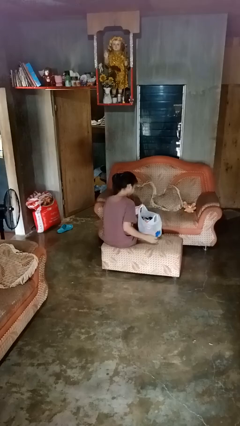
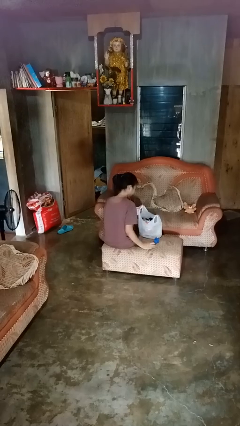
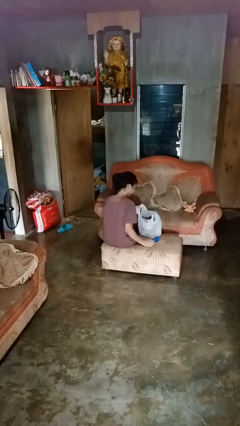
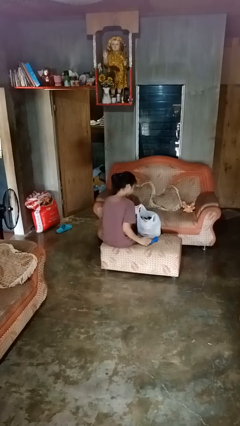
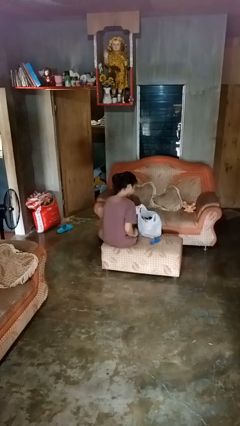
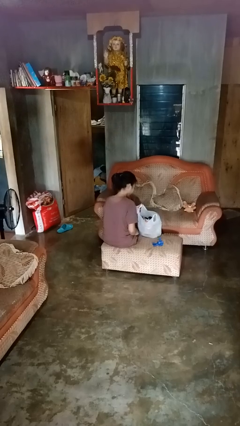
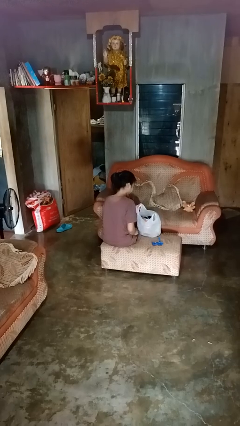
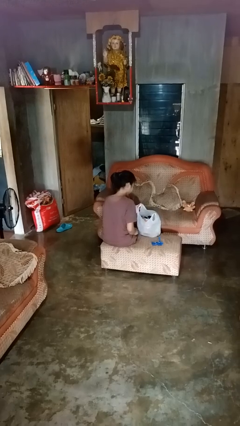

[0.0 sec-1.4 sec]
person takes object from bag

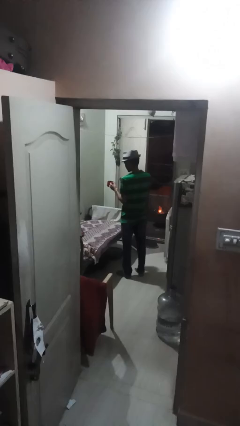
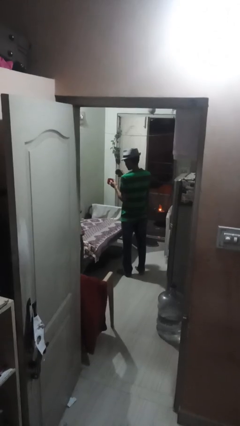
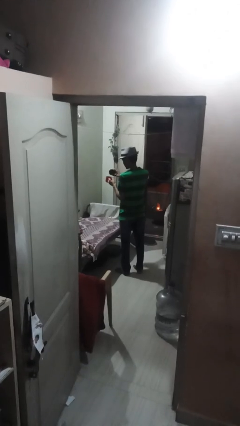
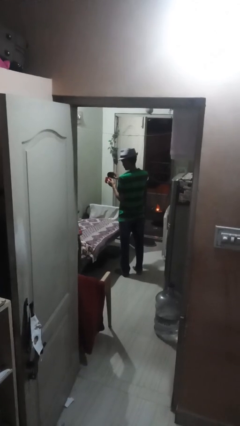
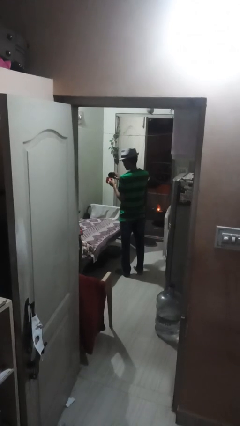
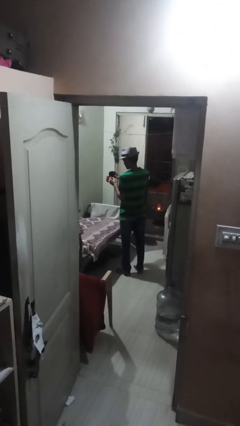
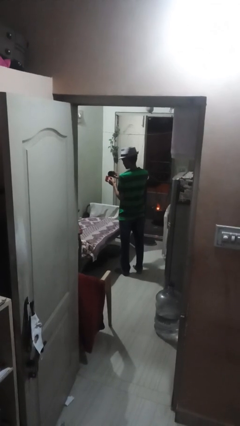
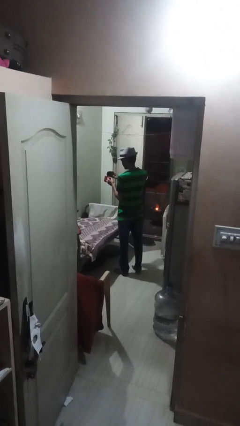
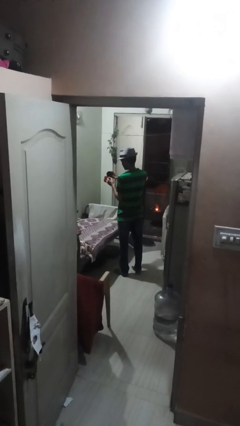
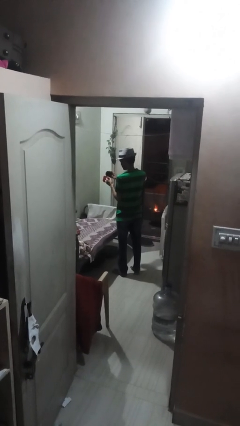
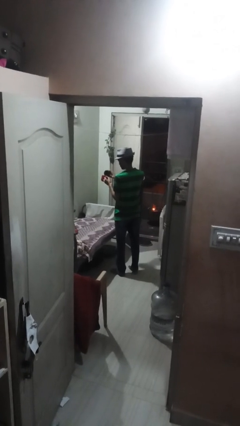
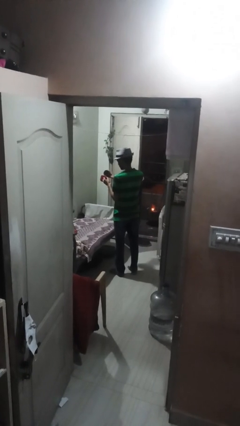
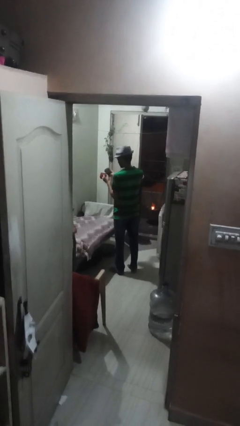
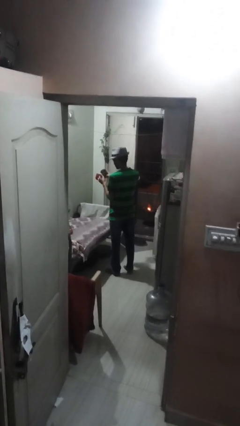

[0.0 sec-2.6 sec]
person pours coffee into mug

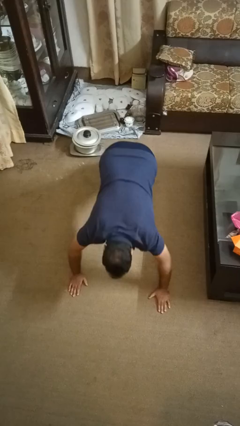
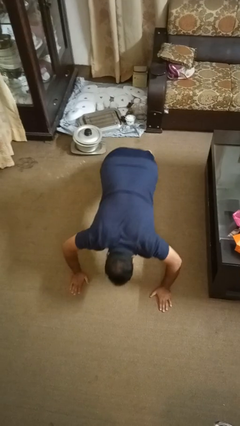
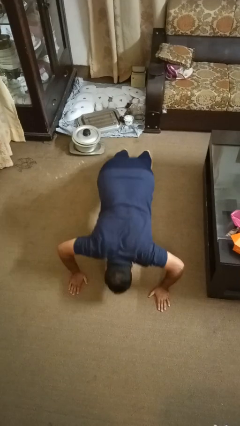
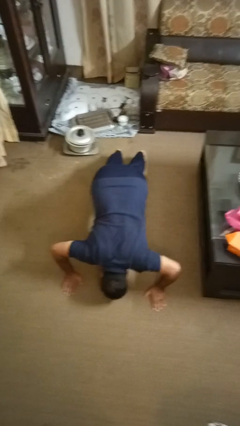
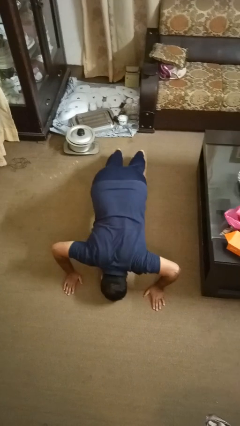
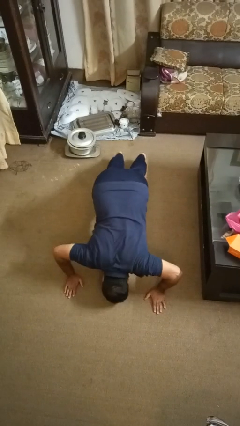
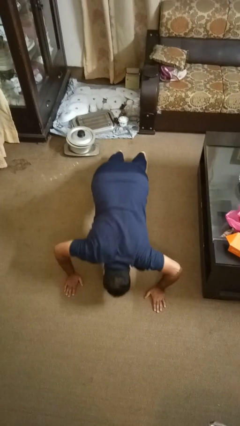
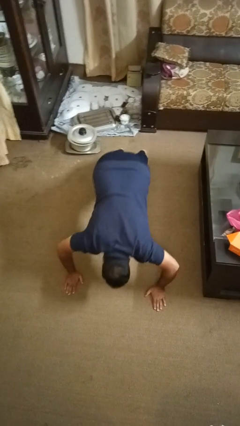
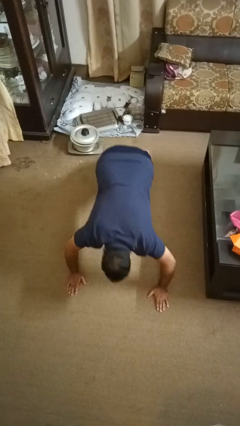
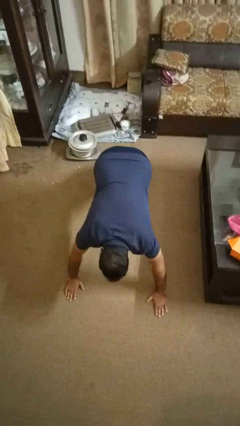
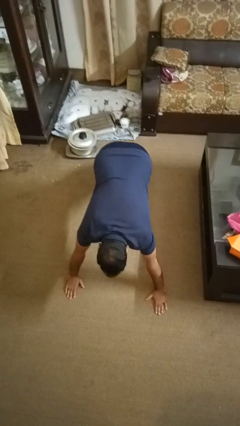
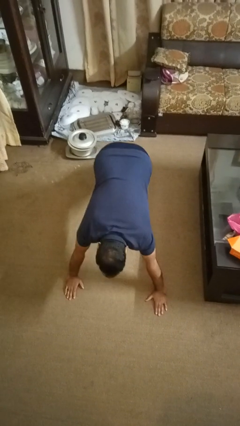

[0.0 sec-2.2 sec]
person exercises with pushup

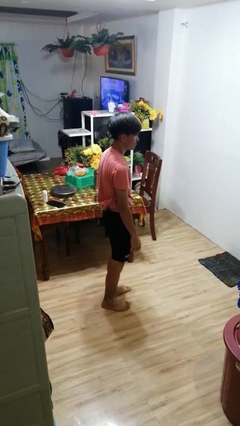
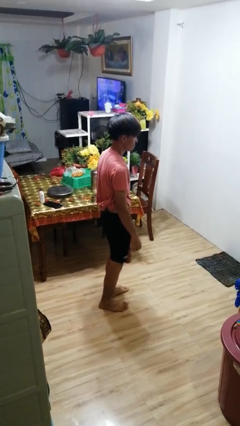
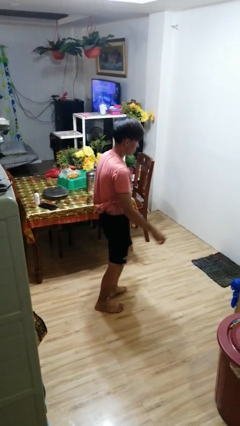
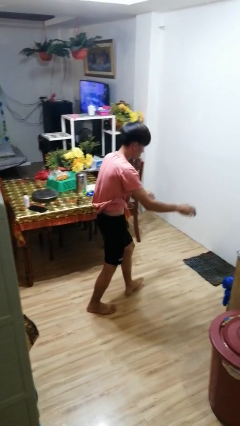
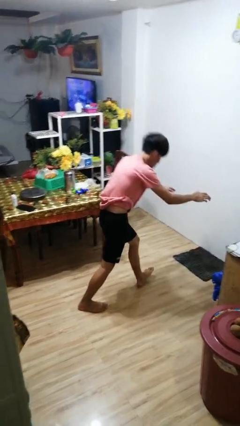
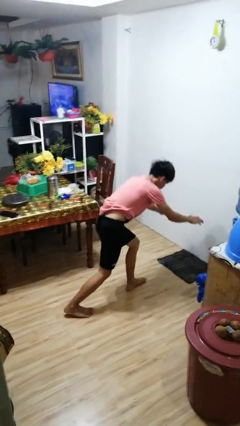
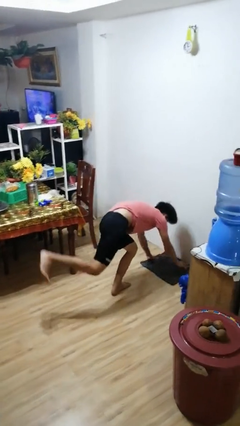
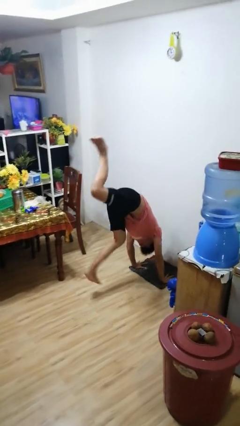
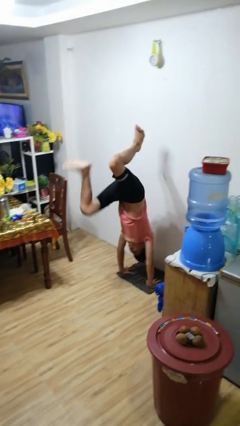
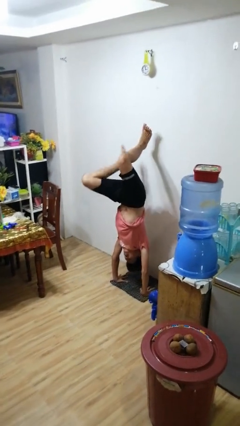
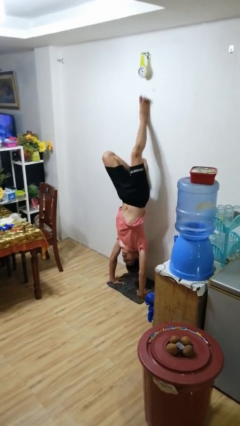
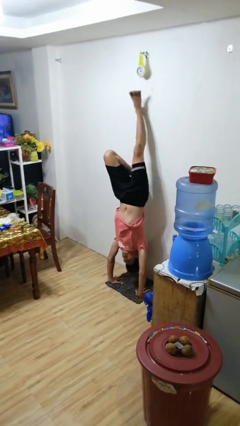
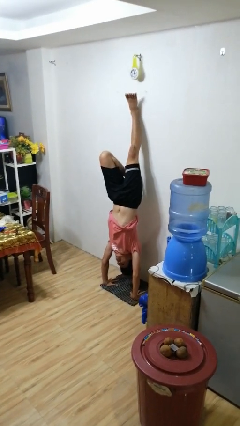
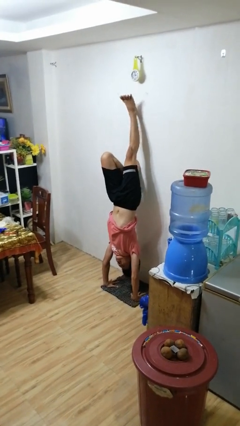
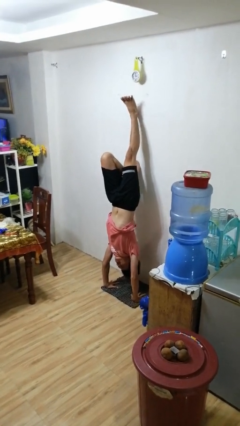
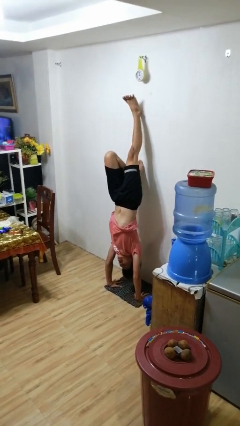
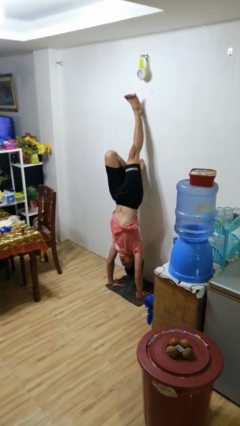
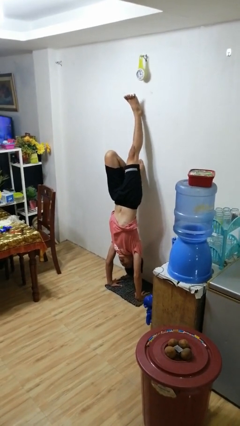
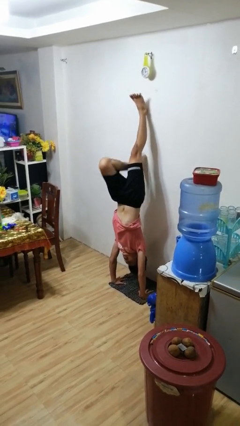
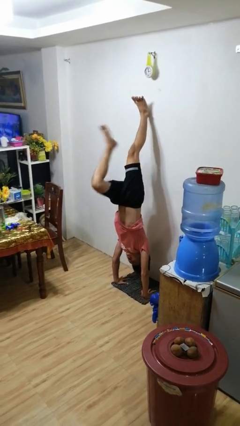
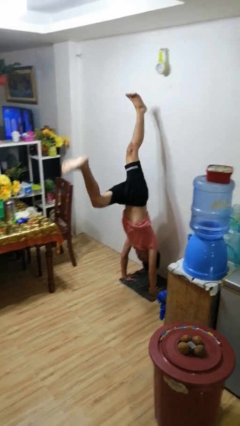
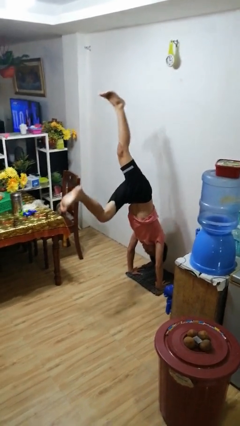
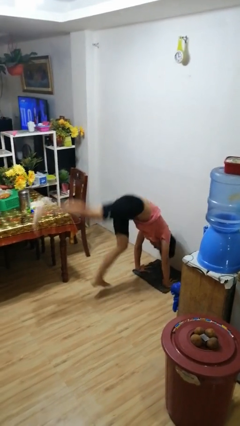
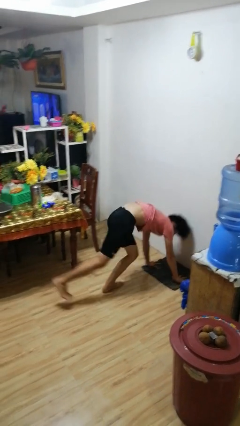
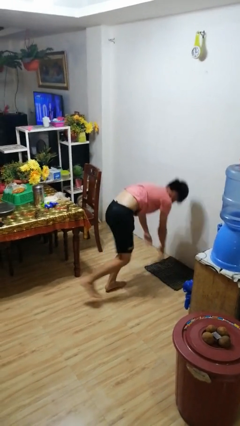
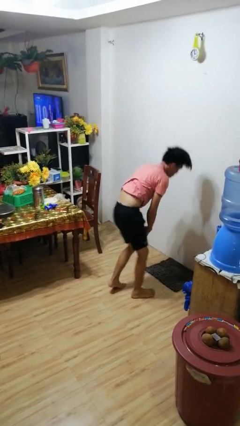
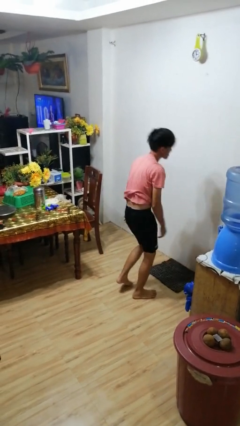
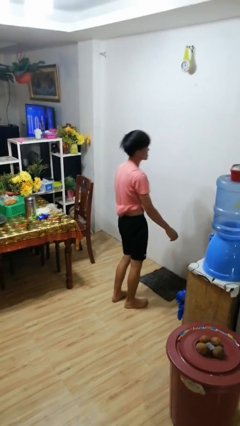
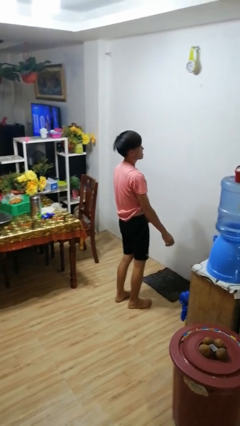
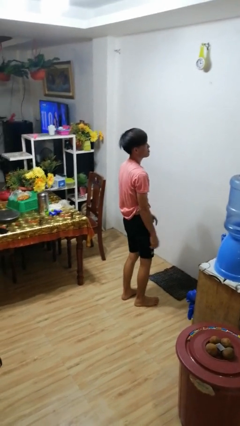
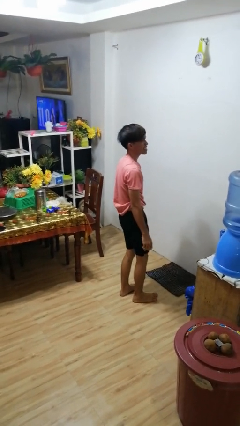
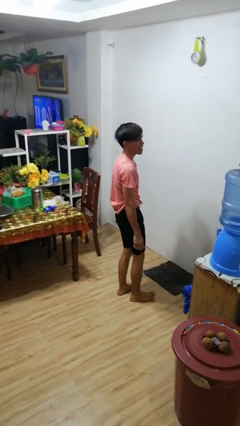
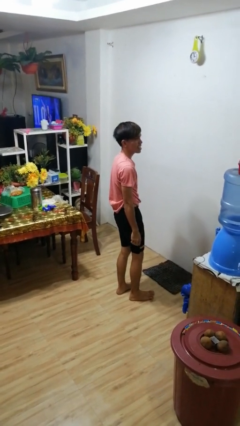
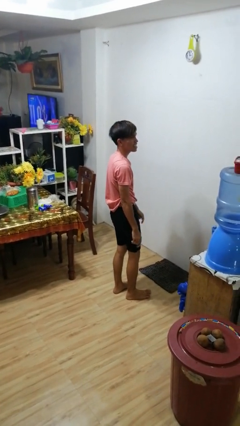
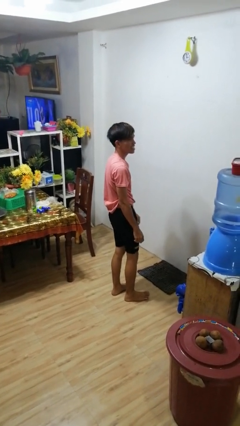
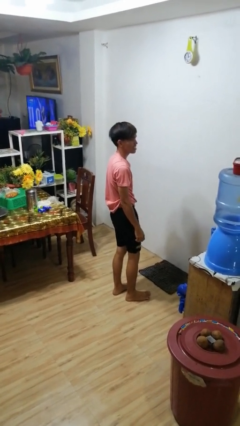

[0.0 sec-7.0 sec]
person handstand

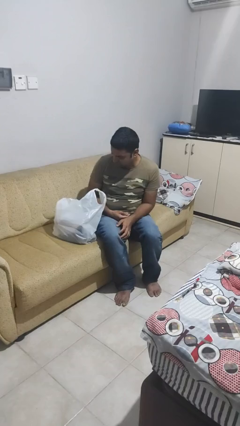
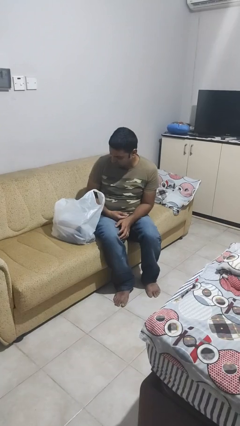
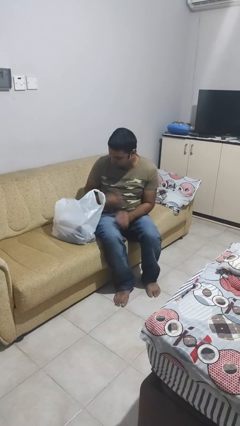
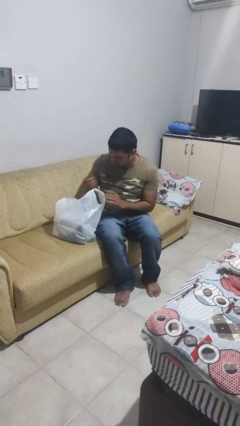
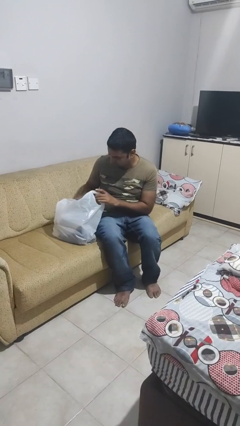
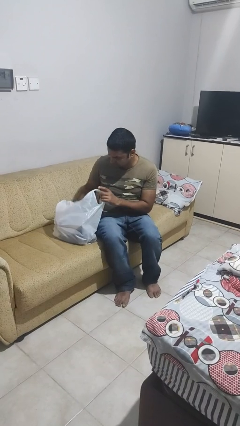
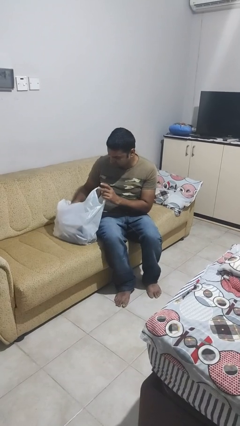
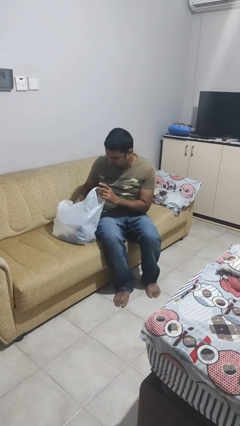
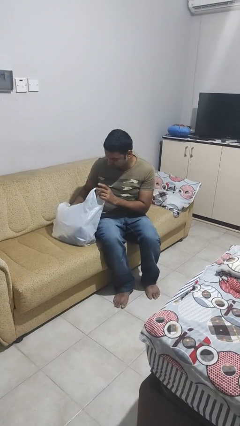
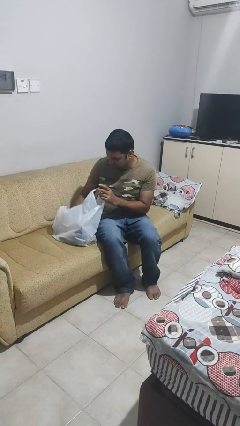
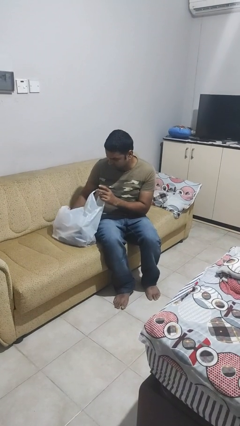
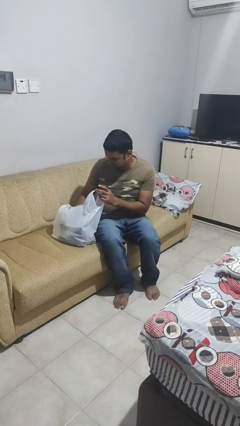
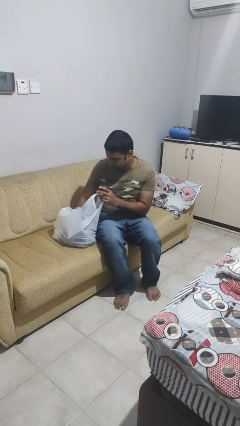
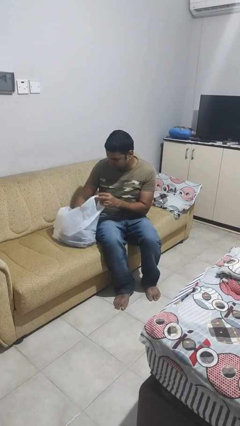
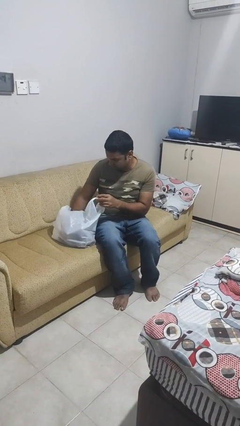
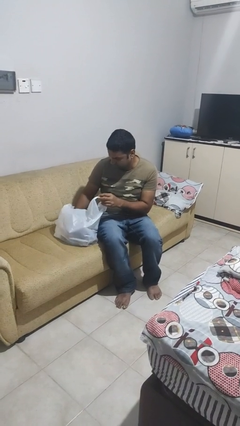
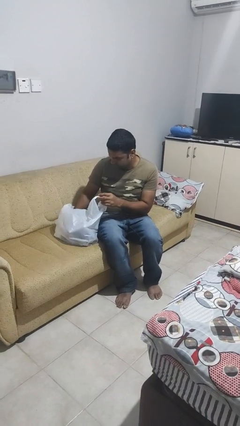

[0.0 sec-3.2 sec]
person searches in bag

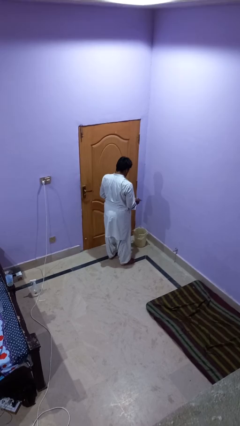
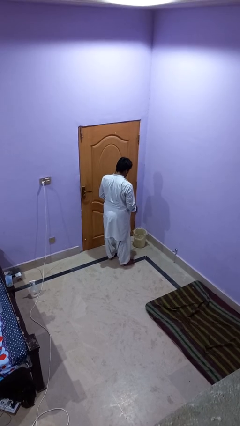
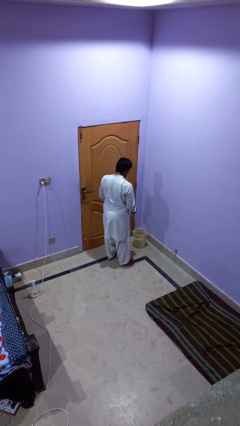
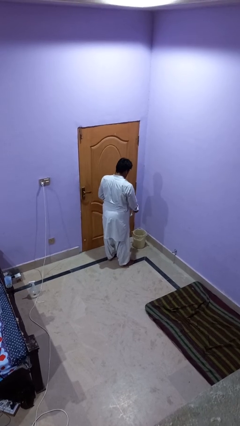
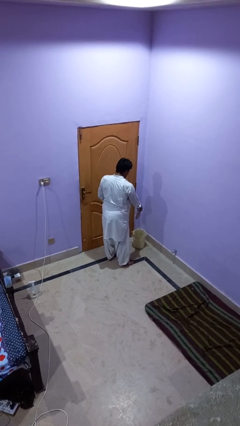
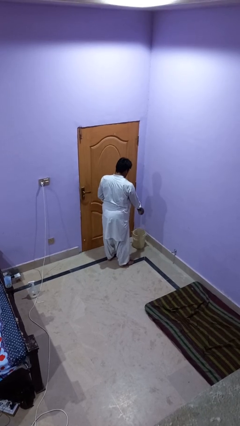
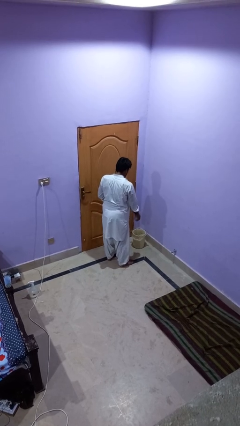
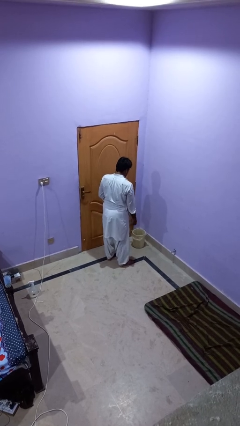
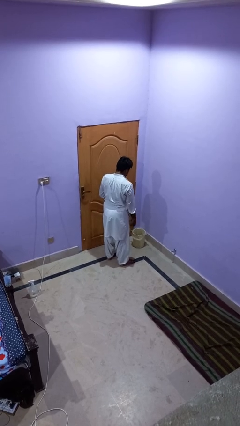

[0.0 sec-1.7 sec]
person discards trash
